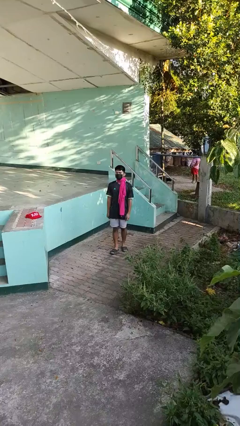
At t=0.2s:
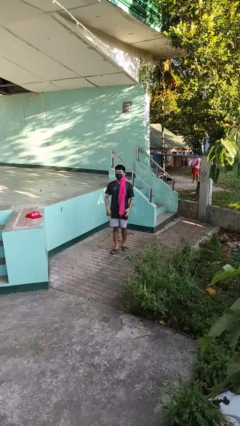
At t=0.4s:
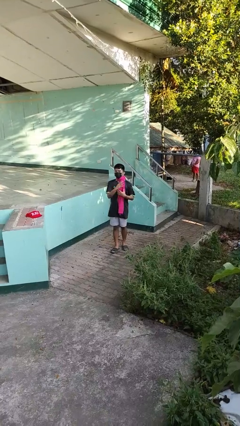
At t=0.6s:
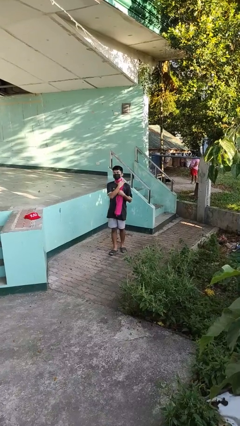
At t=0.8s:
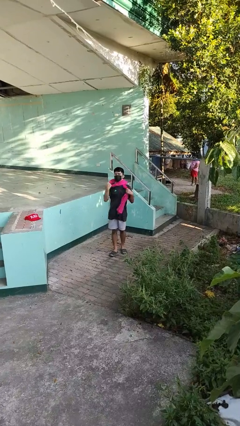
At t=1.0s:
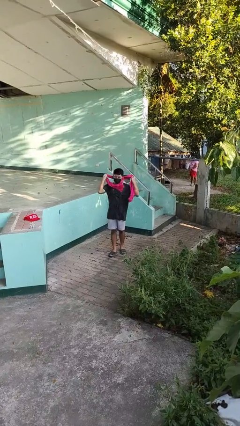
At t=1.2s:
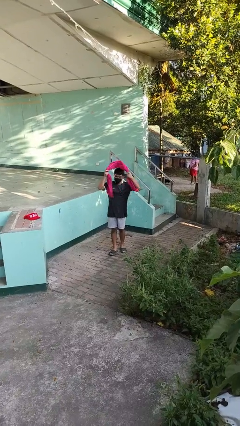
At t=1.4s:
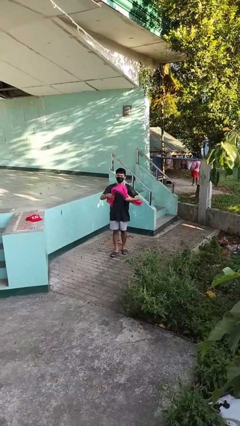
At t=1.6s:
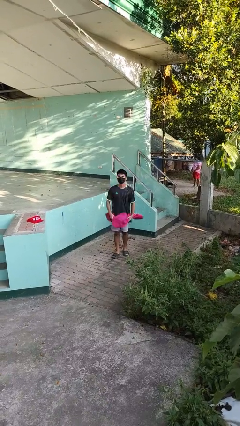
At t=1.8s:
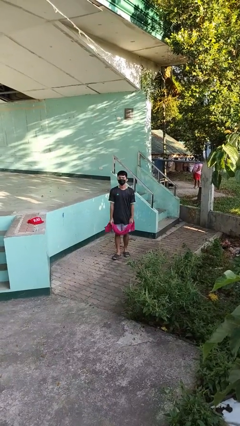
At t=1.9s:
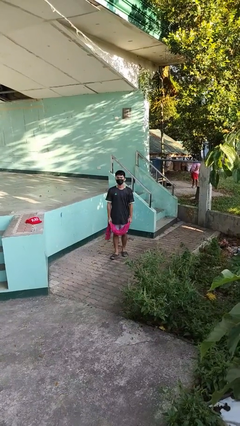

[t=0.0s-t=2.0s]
person takes off scarf

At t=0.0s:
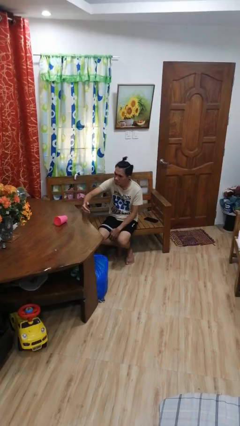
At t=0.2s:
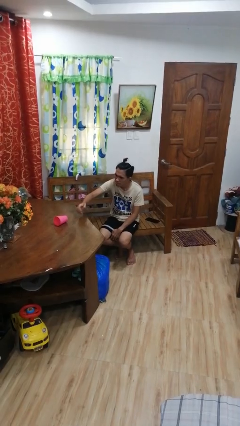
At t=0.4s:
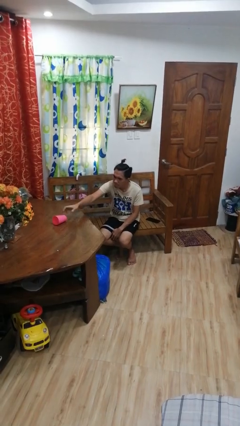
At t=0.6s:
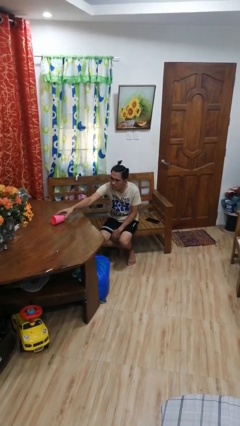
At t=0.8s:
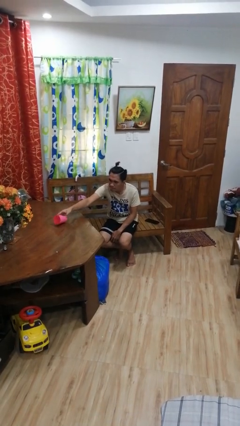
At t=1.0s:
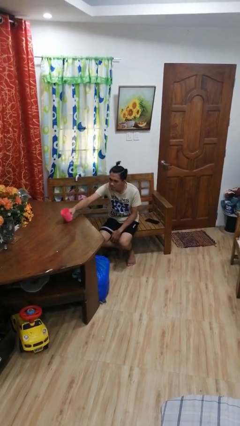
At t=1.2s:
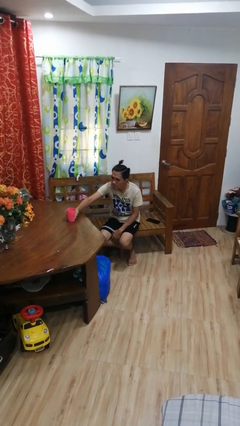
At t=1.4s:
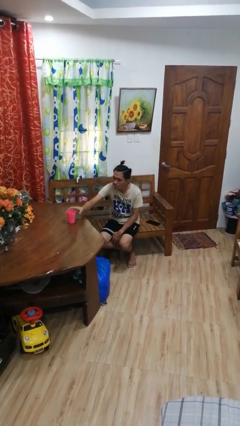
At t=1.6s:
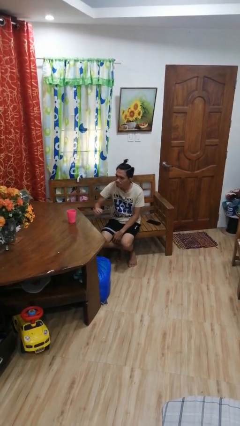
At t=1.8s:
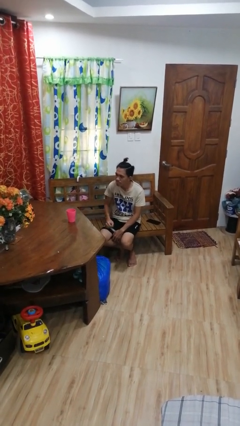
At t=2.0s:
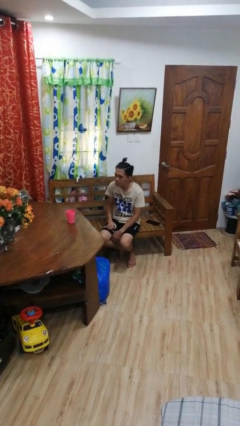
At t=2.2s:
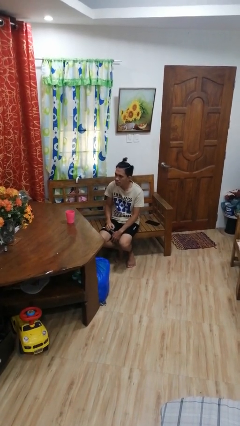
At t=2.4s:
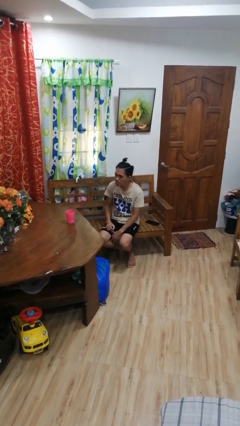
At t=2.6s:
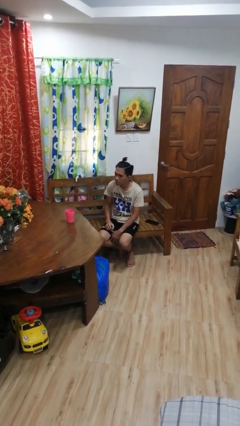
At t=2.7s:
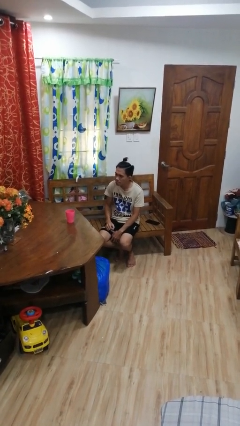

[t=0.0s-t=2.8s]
person sets upright glass

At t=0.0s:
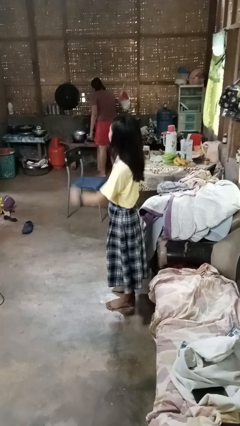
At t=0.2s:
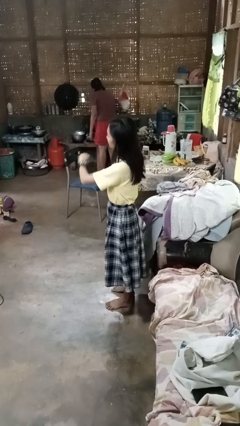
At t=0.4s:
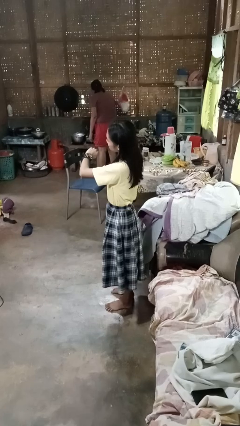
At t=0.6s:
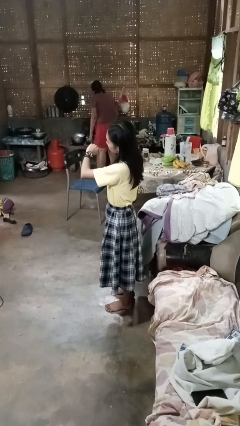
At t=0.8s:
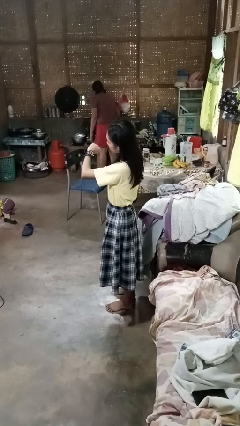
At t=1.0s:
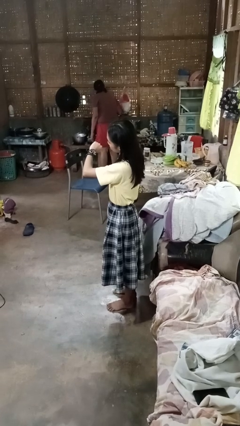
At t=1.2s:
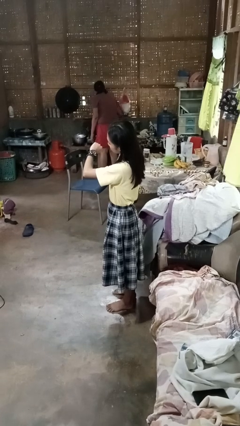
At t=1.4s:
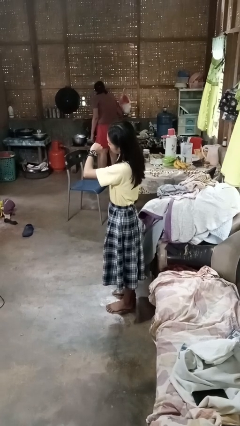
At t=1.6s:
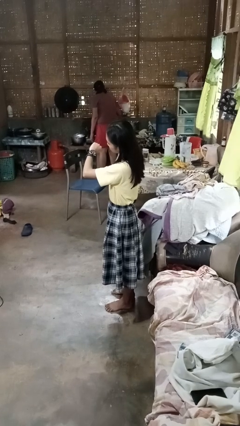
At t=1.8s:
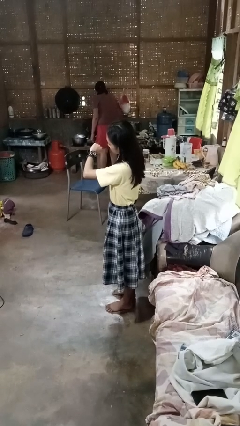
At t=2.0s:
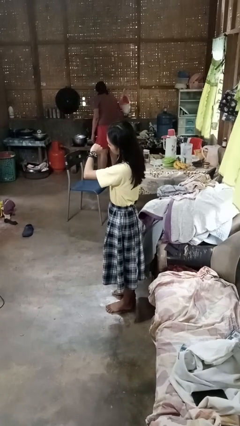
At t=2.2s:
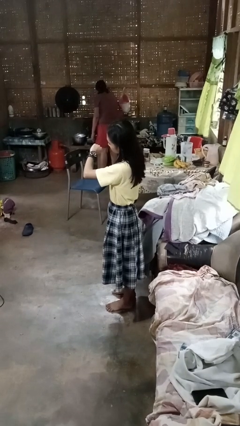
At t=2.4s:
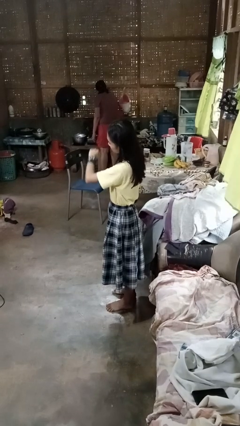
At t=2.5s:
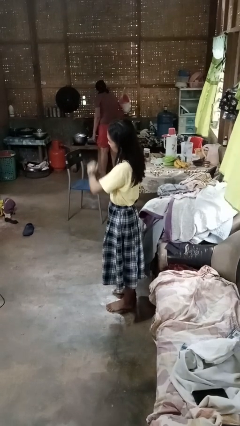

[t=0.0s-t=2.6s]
person looks at wristwatch

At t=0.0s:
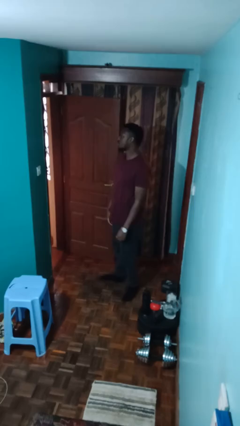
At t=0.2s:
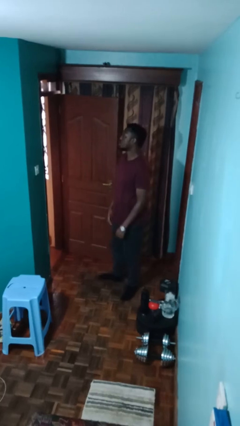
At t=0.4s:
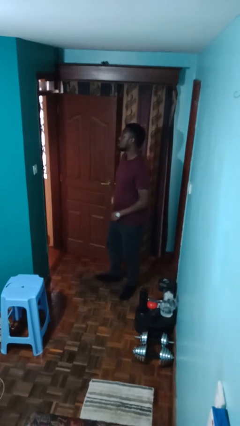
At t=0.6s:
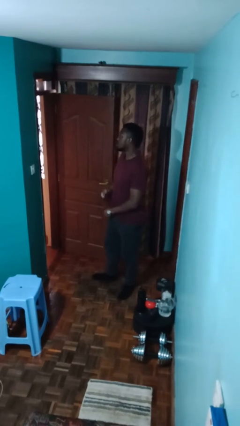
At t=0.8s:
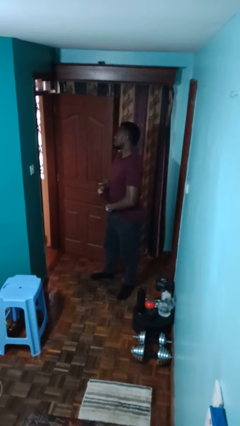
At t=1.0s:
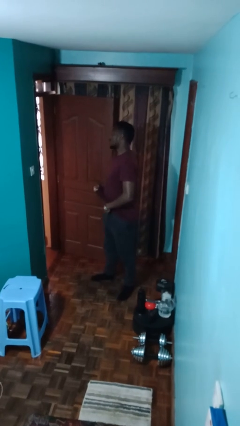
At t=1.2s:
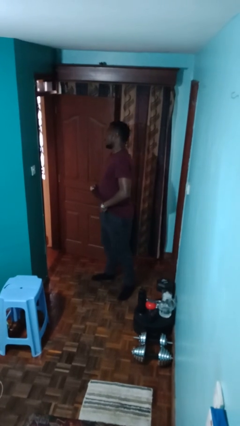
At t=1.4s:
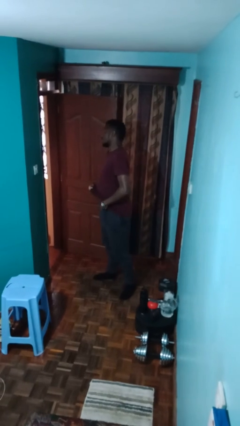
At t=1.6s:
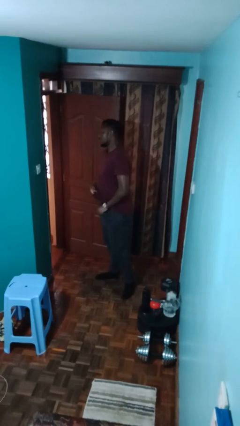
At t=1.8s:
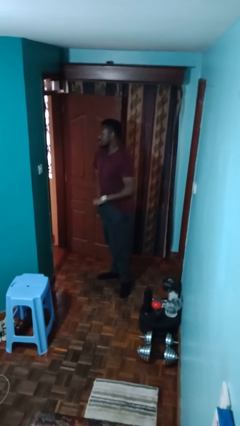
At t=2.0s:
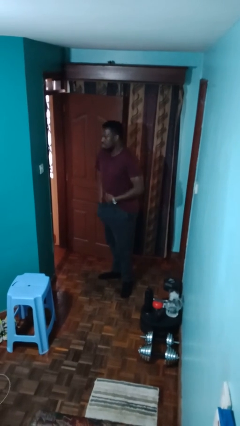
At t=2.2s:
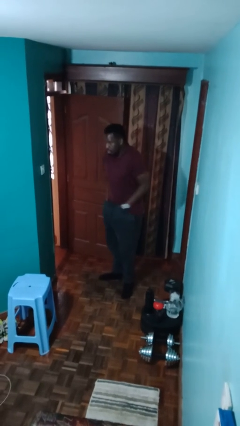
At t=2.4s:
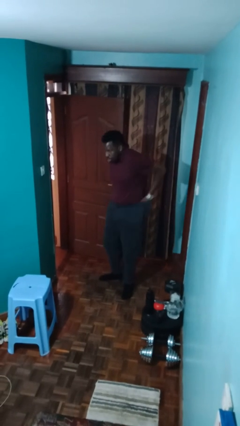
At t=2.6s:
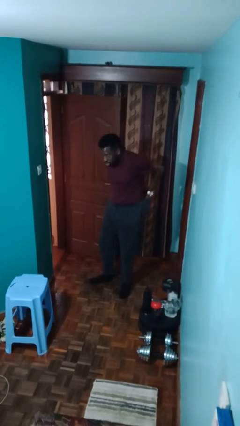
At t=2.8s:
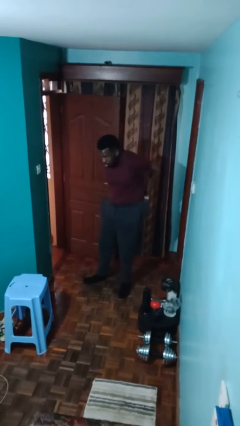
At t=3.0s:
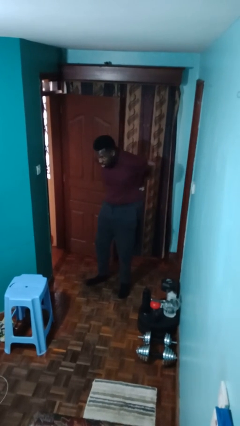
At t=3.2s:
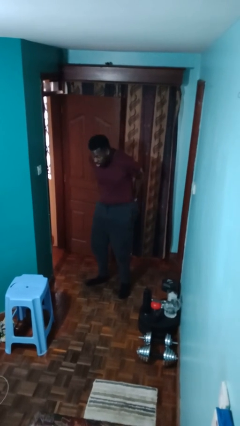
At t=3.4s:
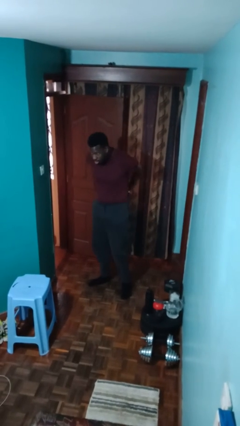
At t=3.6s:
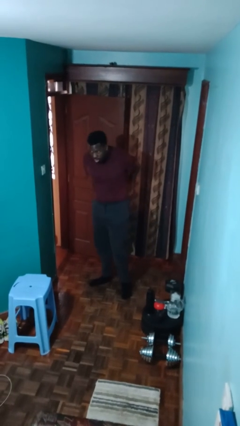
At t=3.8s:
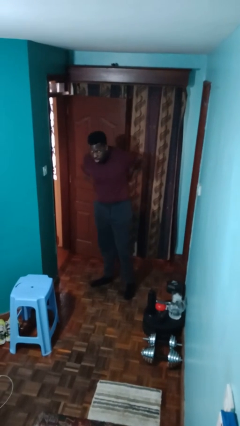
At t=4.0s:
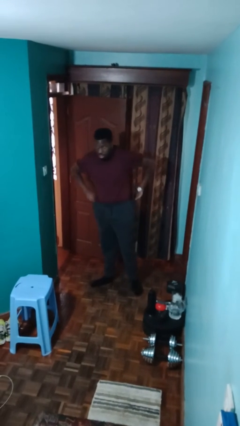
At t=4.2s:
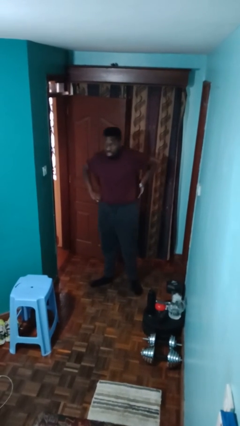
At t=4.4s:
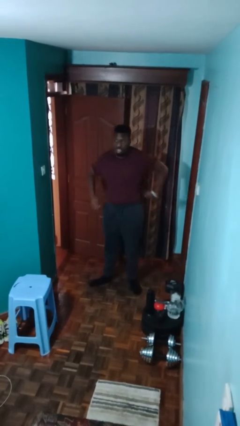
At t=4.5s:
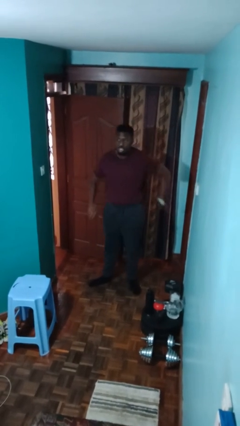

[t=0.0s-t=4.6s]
person tucks in shirt

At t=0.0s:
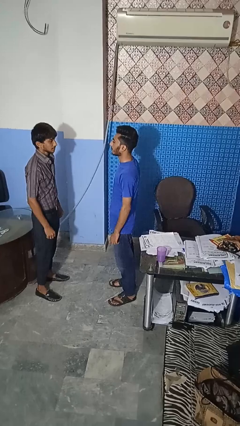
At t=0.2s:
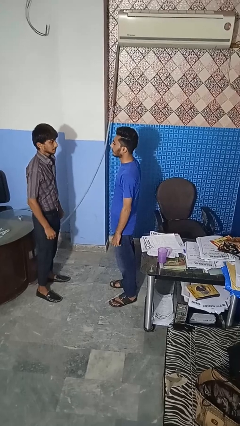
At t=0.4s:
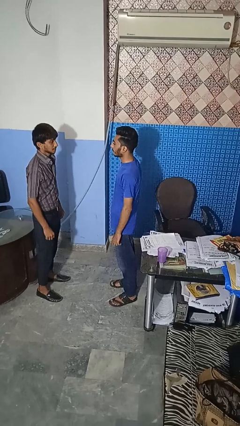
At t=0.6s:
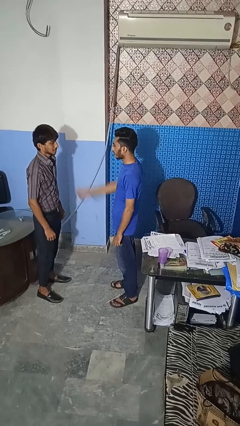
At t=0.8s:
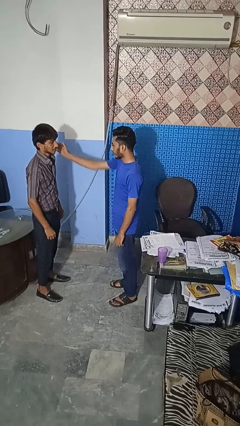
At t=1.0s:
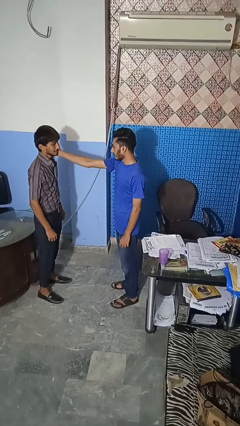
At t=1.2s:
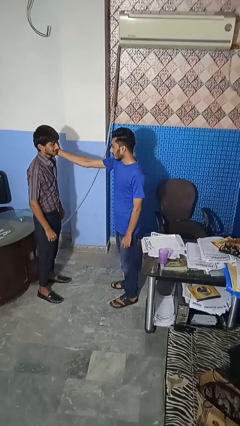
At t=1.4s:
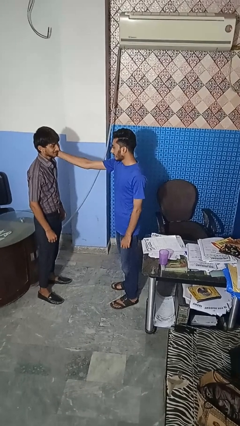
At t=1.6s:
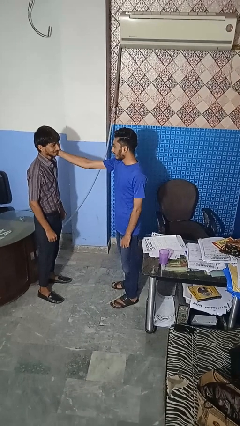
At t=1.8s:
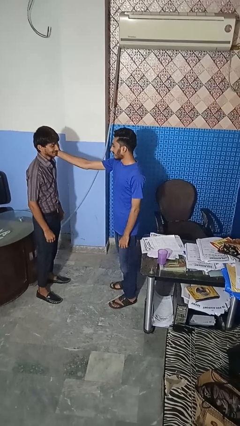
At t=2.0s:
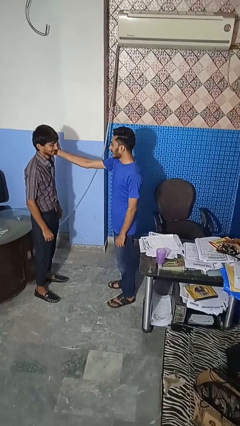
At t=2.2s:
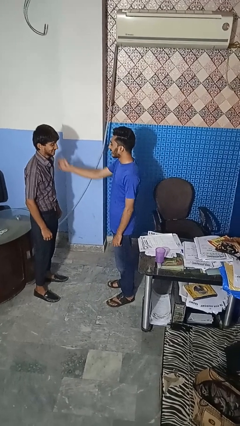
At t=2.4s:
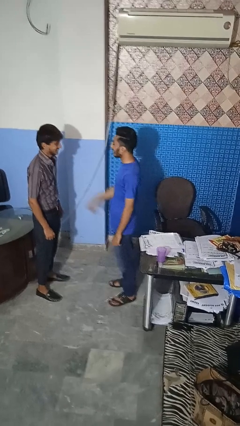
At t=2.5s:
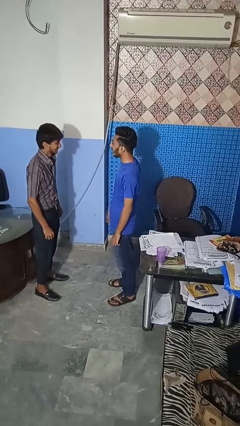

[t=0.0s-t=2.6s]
person touches face of person

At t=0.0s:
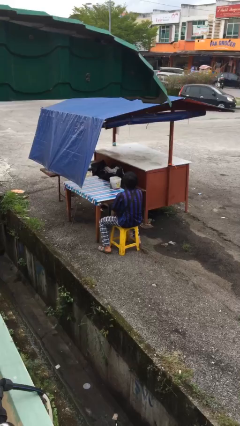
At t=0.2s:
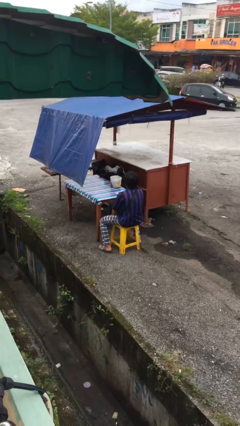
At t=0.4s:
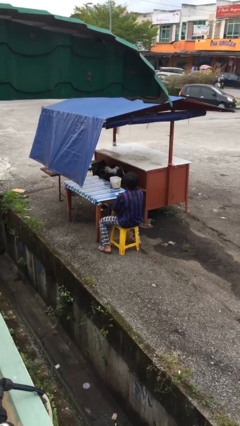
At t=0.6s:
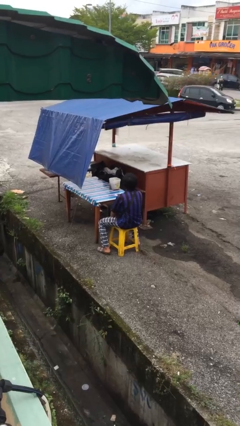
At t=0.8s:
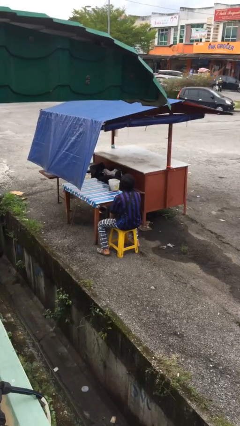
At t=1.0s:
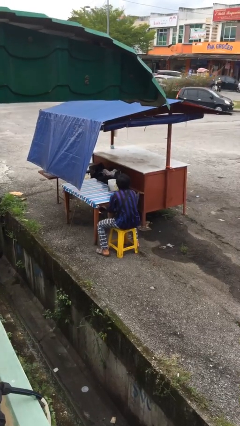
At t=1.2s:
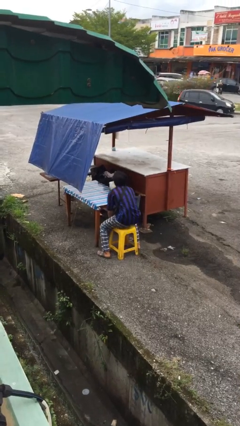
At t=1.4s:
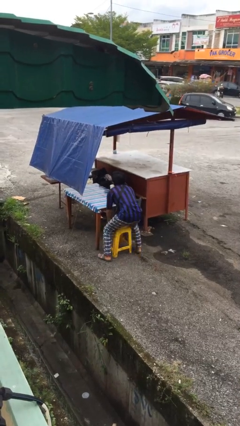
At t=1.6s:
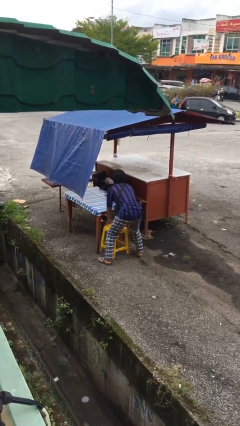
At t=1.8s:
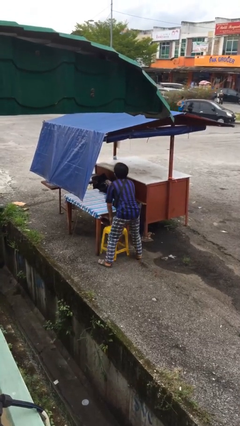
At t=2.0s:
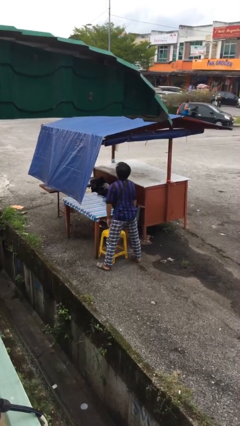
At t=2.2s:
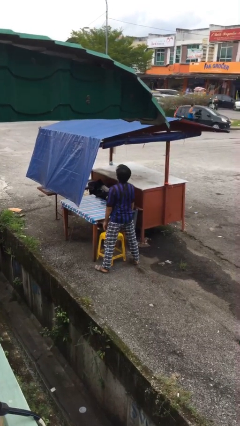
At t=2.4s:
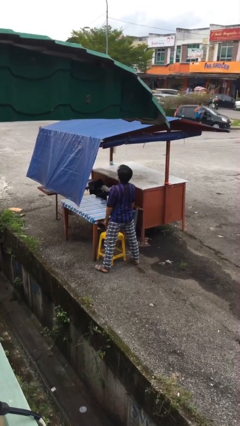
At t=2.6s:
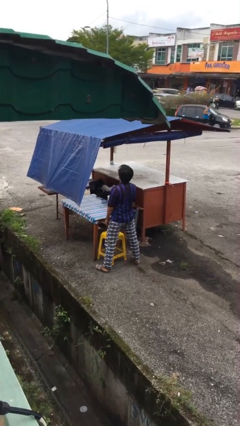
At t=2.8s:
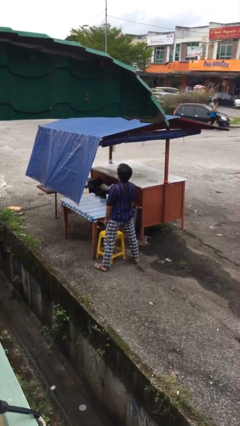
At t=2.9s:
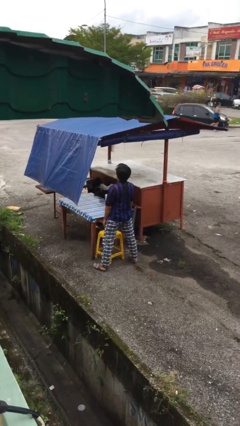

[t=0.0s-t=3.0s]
person stands up
